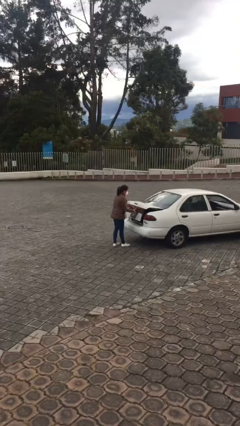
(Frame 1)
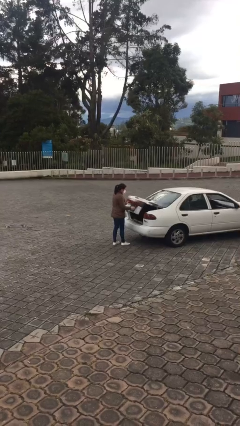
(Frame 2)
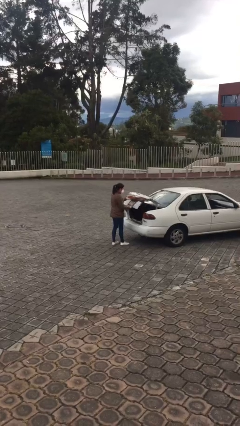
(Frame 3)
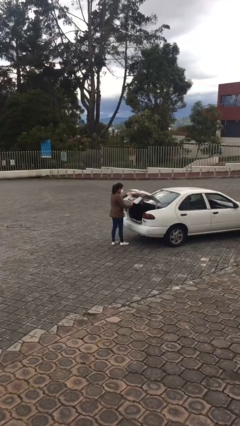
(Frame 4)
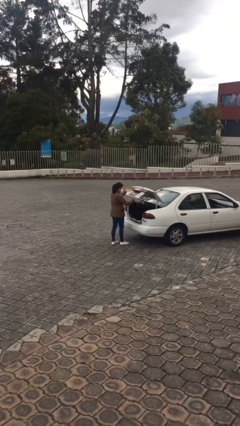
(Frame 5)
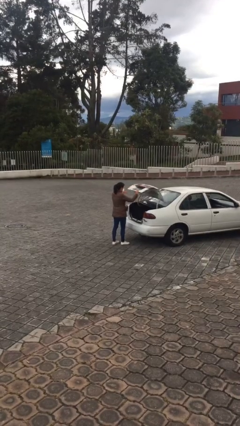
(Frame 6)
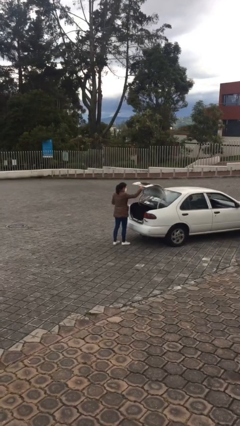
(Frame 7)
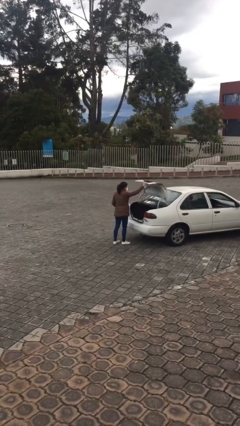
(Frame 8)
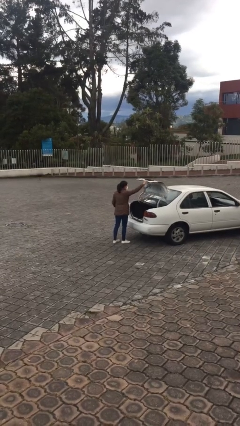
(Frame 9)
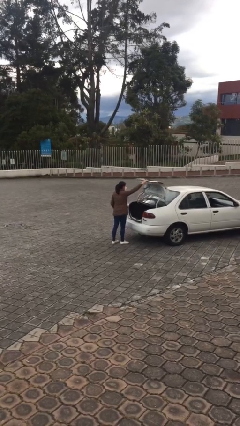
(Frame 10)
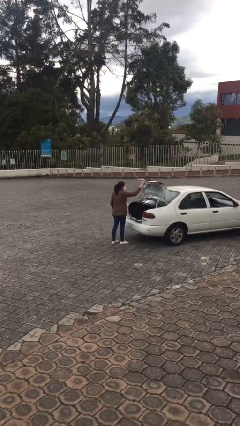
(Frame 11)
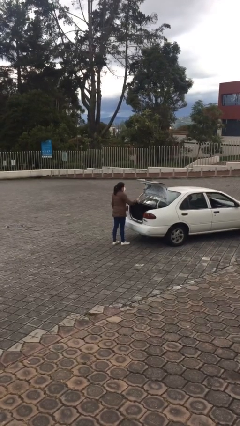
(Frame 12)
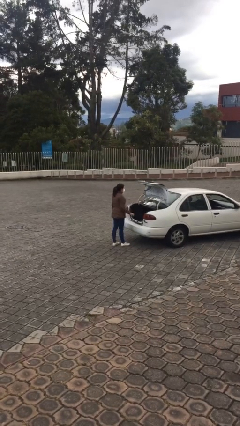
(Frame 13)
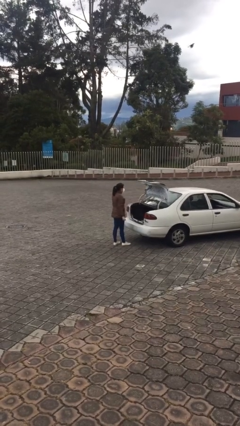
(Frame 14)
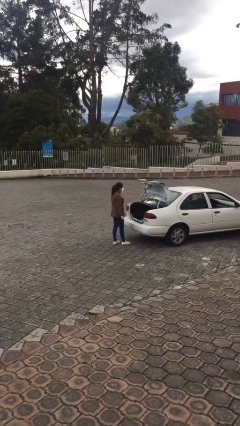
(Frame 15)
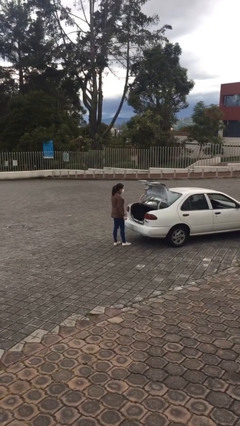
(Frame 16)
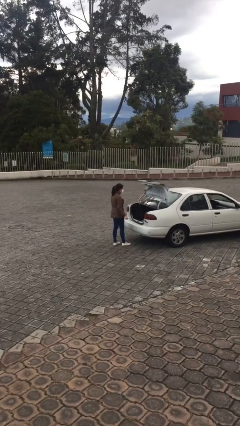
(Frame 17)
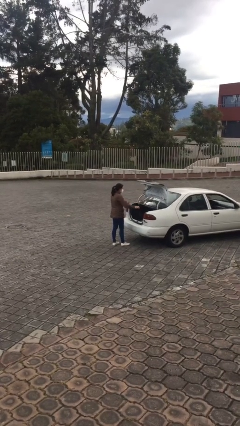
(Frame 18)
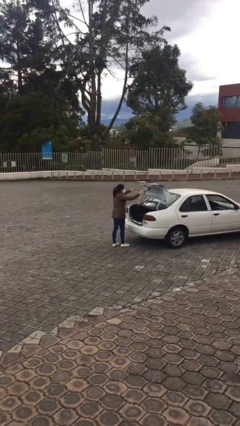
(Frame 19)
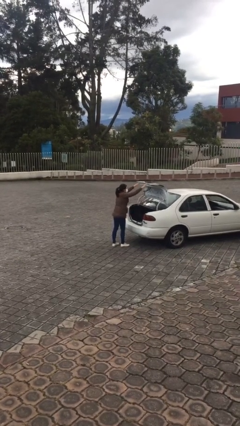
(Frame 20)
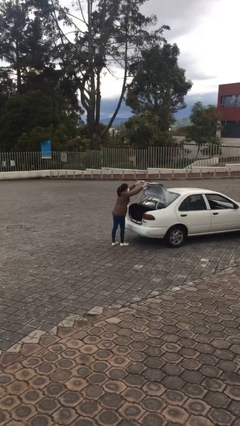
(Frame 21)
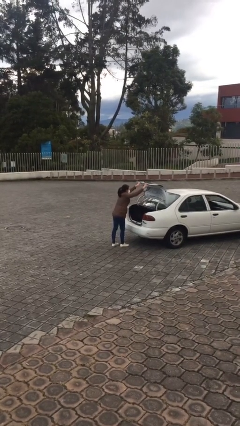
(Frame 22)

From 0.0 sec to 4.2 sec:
person opens car trunk

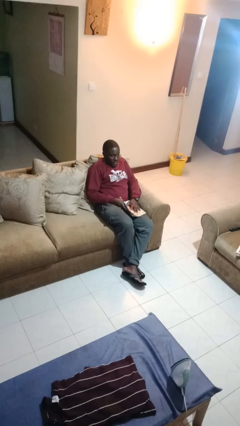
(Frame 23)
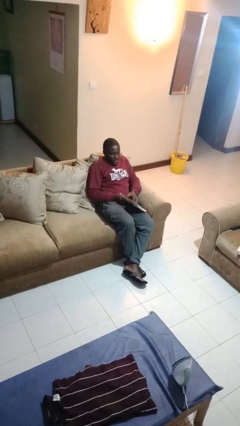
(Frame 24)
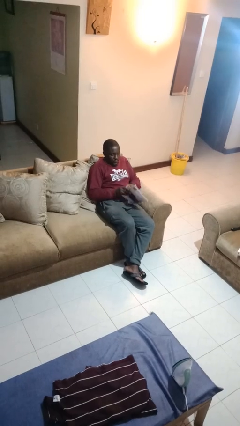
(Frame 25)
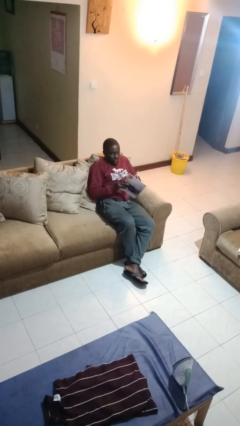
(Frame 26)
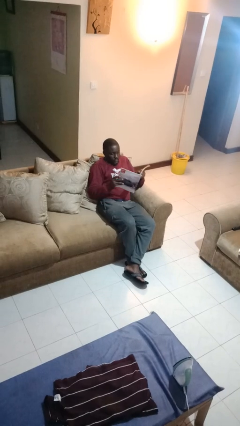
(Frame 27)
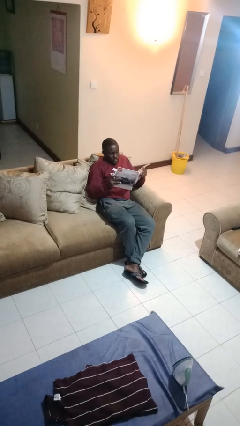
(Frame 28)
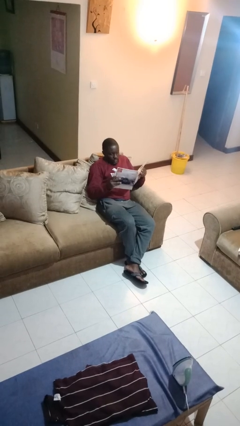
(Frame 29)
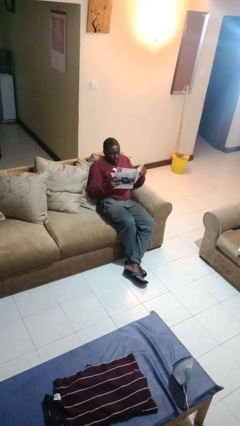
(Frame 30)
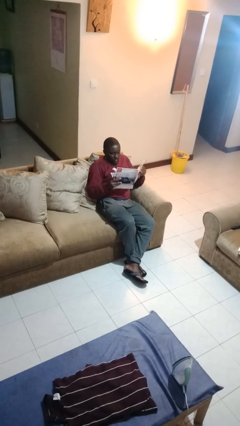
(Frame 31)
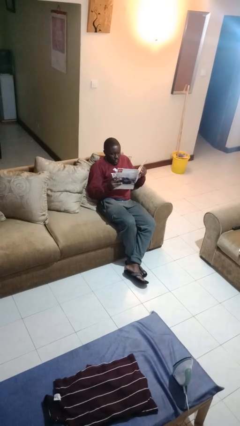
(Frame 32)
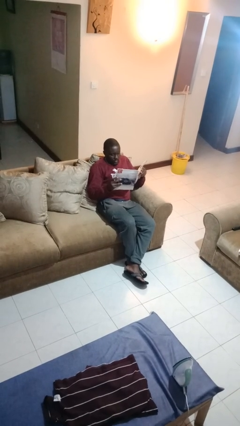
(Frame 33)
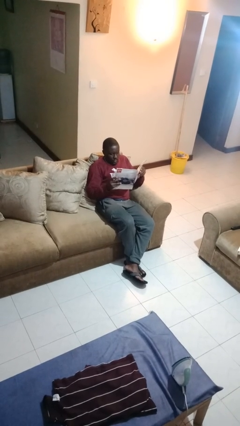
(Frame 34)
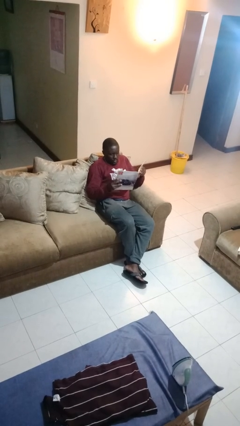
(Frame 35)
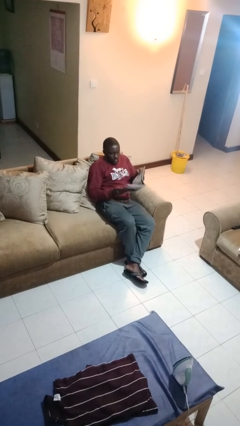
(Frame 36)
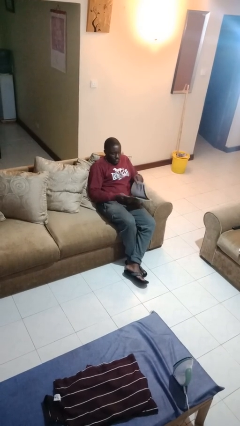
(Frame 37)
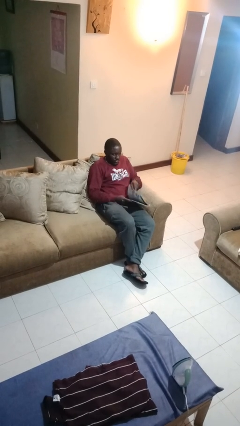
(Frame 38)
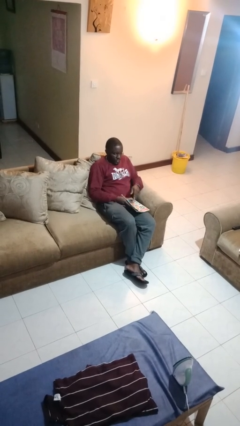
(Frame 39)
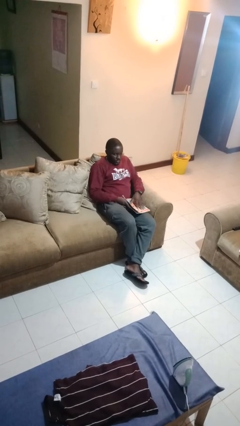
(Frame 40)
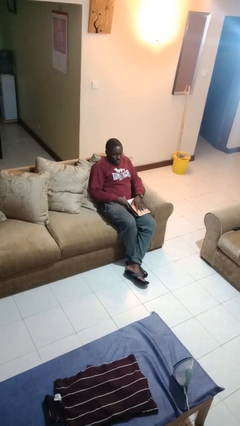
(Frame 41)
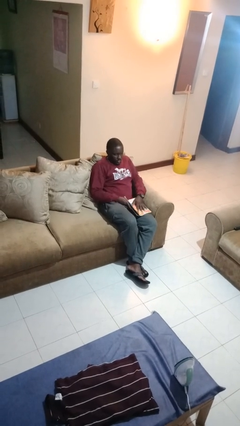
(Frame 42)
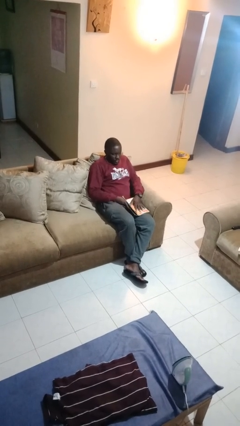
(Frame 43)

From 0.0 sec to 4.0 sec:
person reads magazine

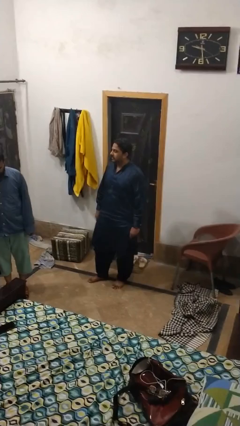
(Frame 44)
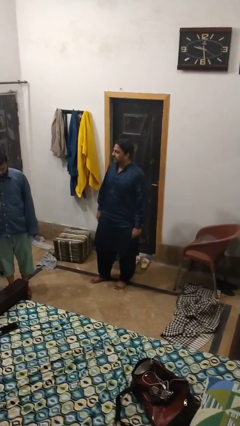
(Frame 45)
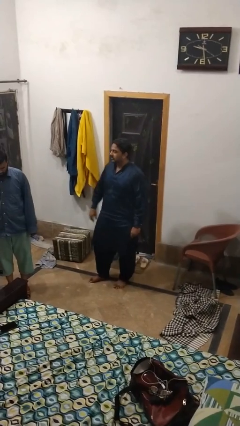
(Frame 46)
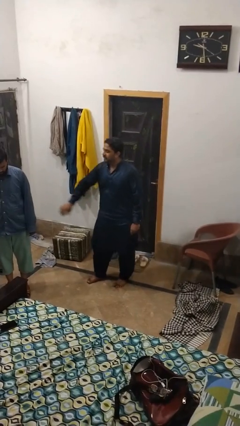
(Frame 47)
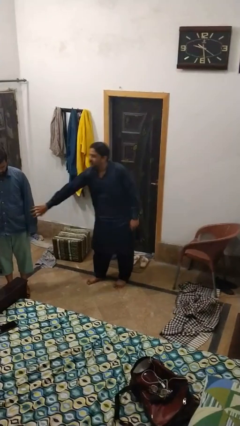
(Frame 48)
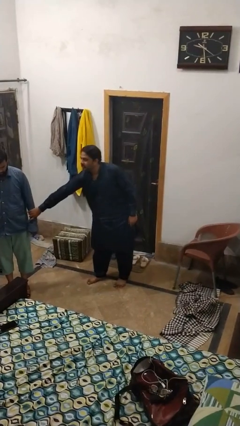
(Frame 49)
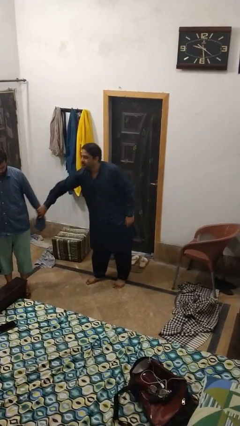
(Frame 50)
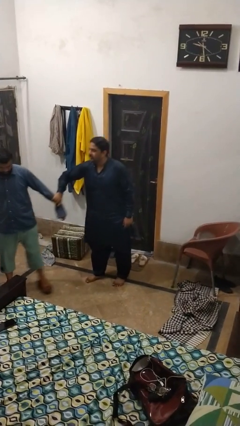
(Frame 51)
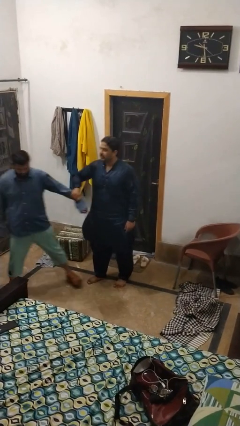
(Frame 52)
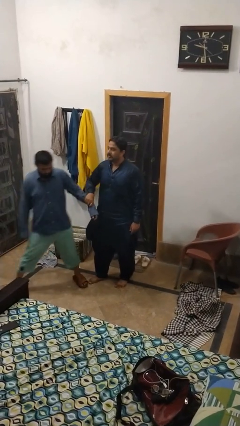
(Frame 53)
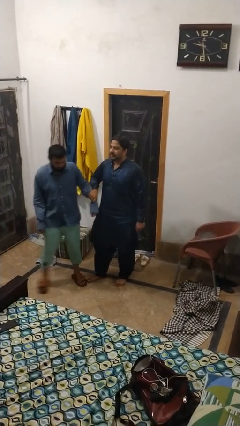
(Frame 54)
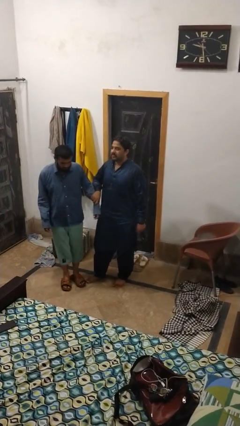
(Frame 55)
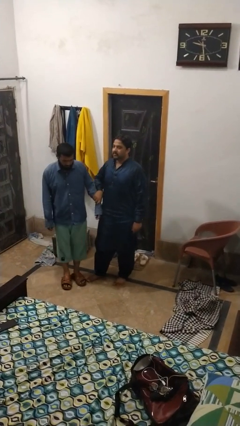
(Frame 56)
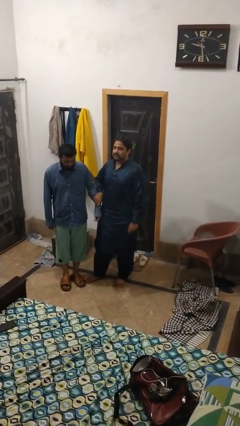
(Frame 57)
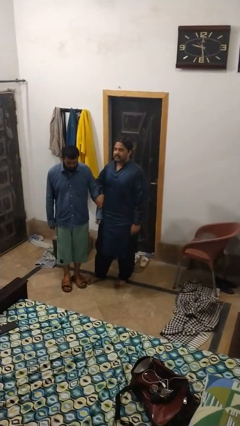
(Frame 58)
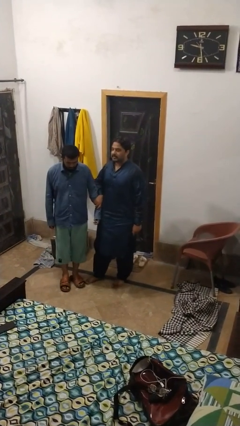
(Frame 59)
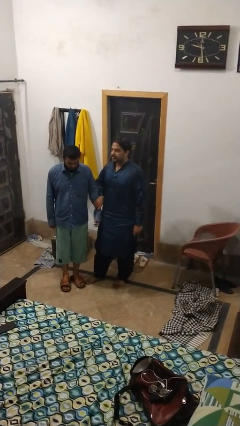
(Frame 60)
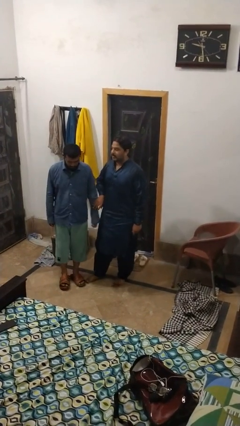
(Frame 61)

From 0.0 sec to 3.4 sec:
person grabs person by forearm

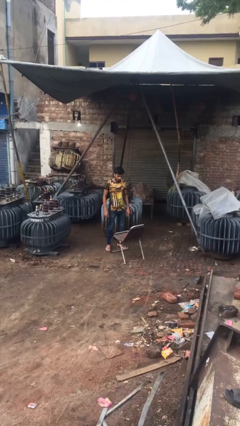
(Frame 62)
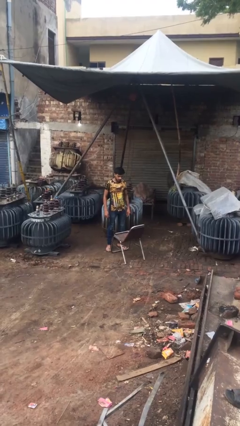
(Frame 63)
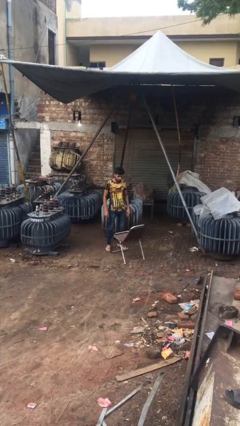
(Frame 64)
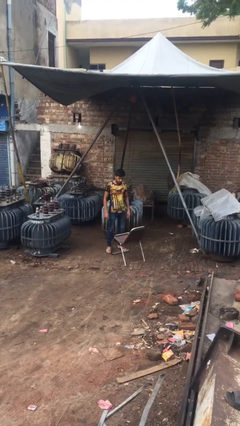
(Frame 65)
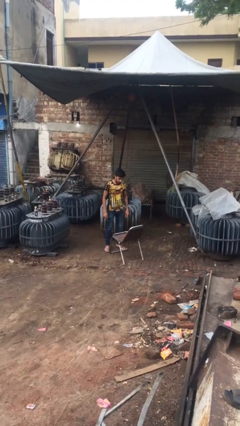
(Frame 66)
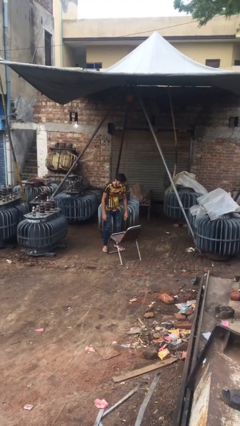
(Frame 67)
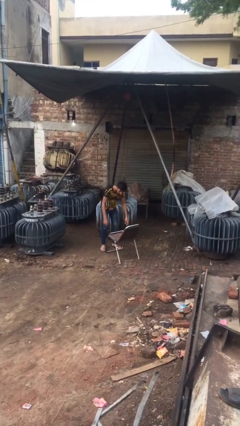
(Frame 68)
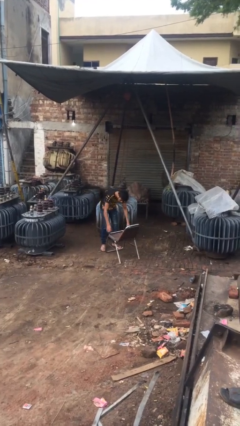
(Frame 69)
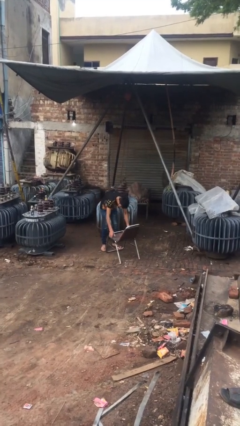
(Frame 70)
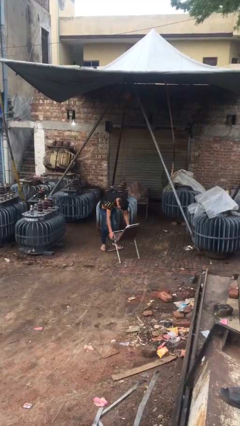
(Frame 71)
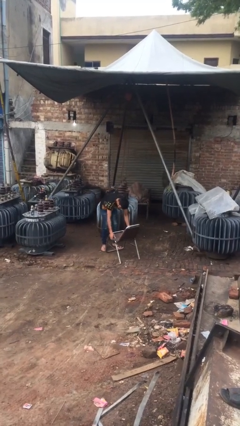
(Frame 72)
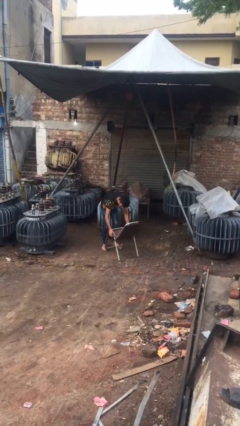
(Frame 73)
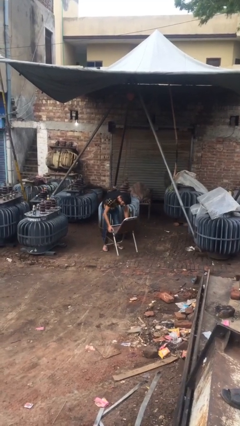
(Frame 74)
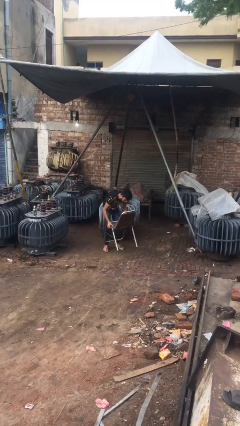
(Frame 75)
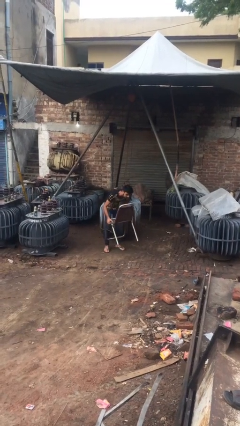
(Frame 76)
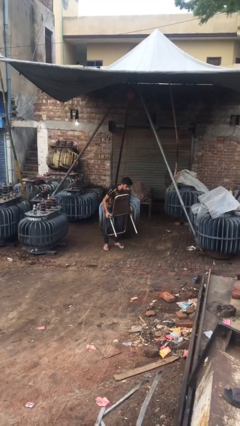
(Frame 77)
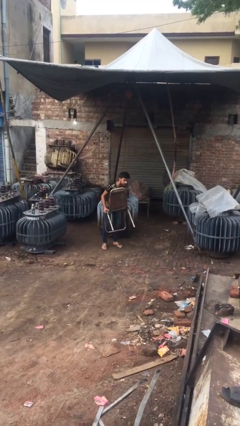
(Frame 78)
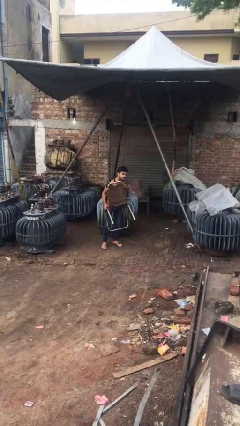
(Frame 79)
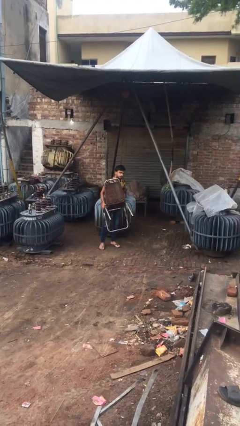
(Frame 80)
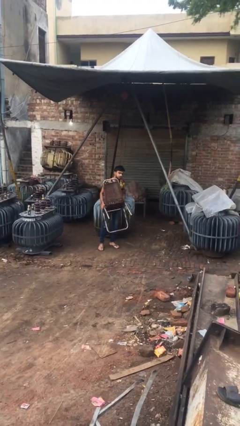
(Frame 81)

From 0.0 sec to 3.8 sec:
person picks up object from floor

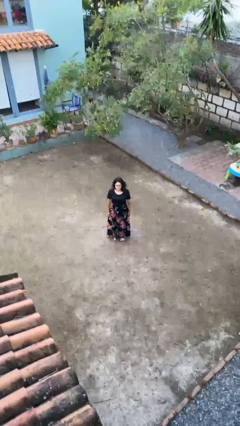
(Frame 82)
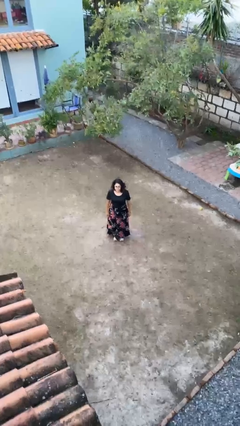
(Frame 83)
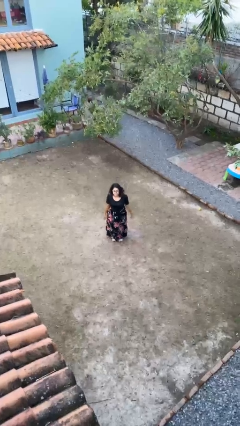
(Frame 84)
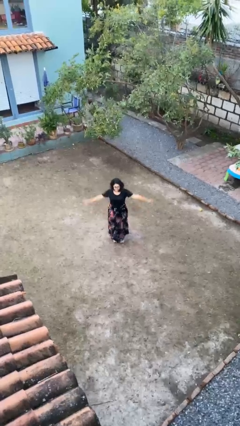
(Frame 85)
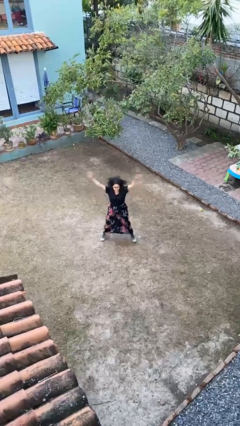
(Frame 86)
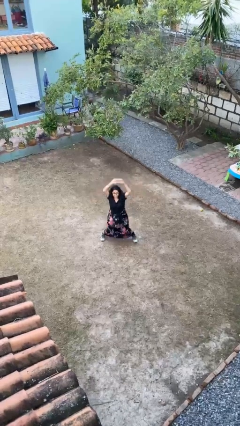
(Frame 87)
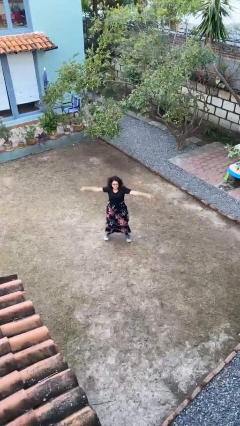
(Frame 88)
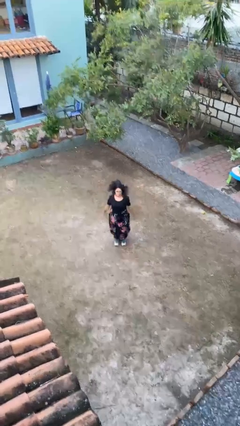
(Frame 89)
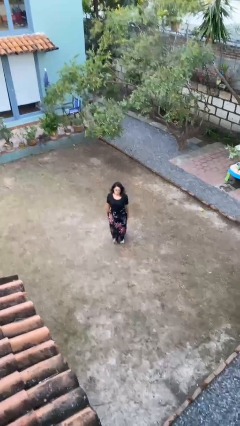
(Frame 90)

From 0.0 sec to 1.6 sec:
person exercises with jumping jacks
